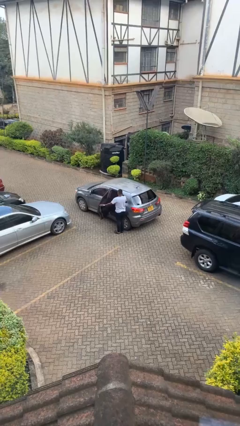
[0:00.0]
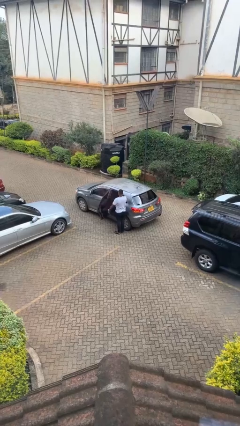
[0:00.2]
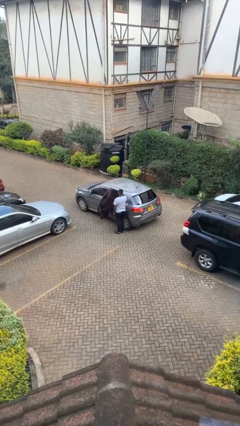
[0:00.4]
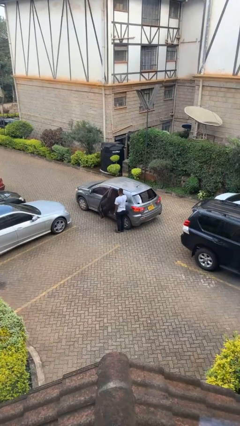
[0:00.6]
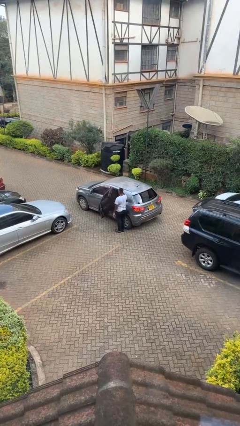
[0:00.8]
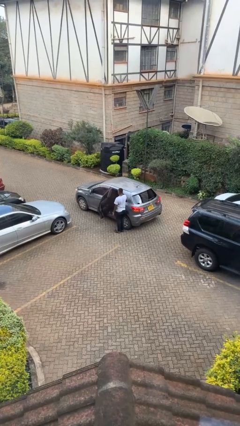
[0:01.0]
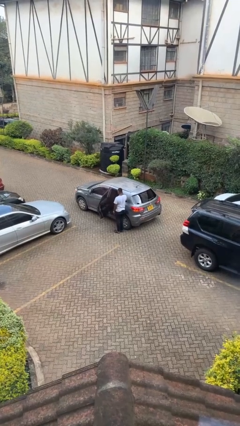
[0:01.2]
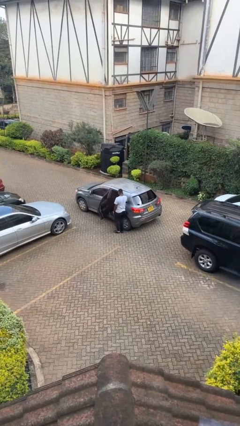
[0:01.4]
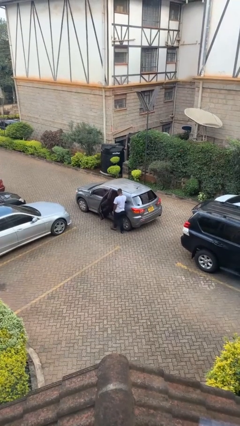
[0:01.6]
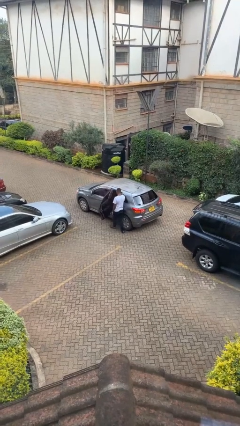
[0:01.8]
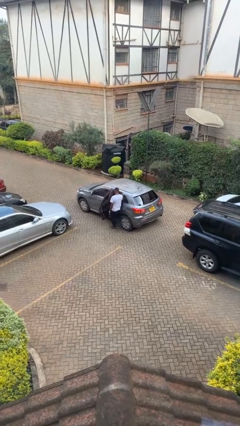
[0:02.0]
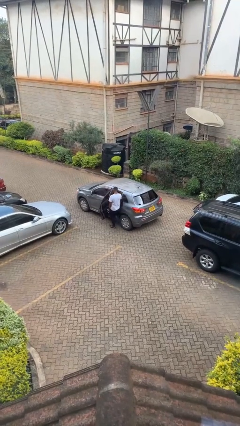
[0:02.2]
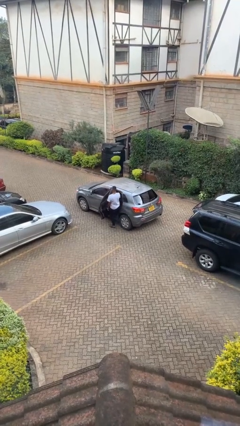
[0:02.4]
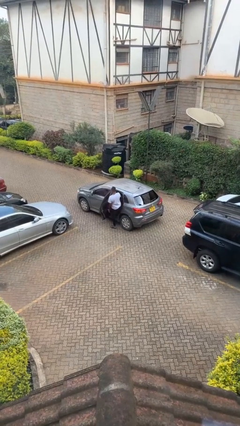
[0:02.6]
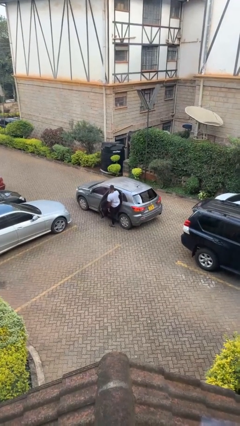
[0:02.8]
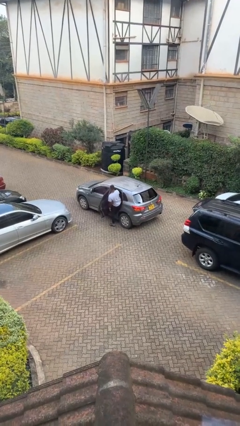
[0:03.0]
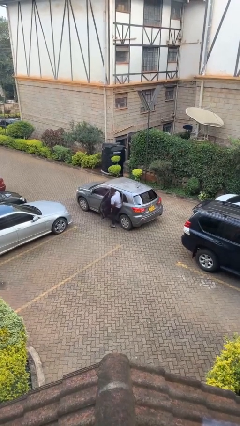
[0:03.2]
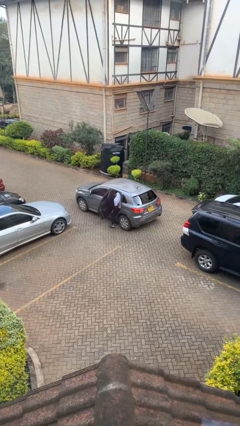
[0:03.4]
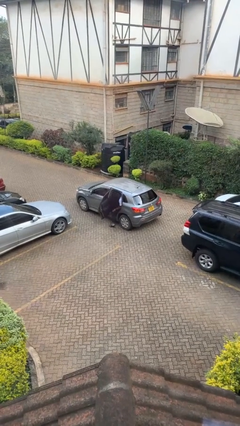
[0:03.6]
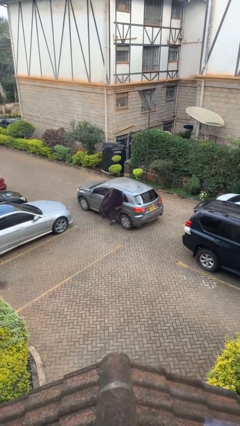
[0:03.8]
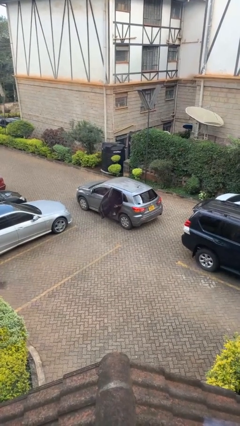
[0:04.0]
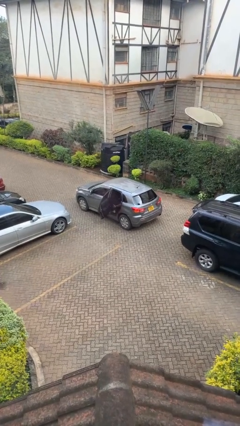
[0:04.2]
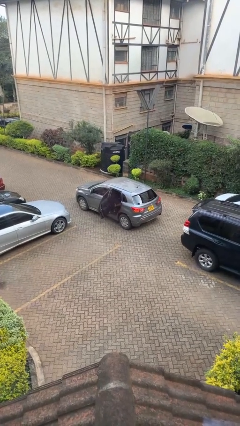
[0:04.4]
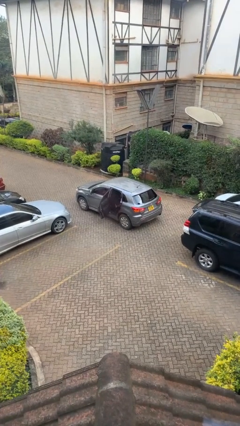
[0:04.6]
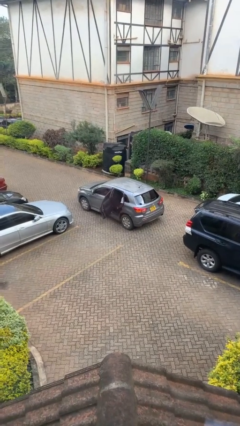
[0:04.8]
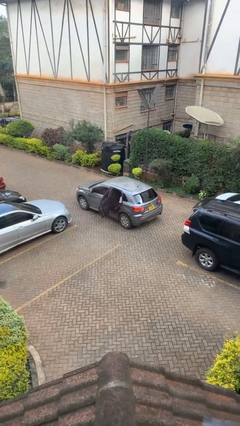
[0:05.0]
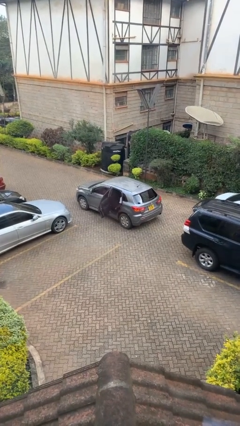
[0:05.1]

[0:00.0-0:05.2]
person enters car

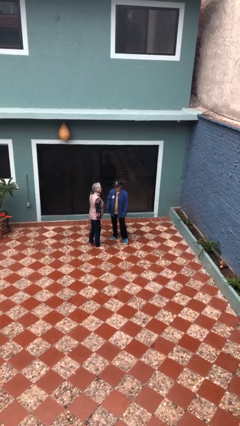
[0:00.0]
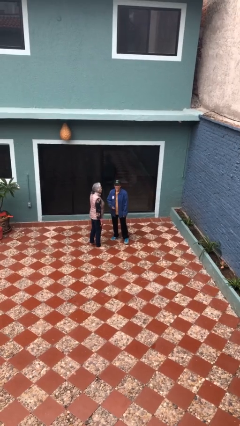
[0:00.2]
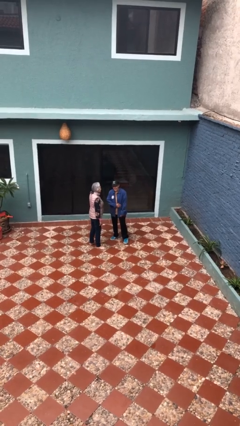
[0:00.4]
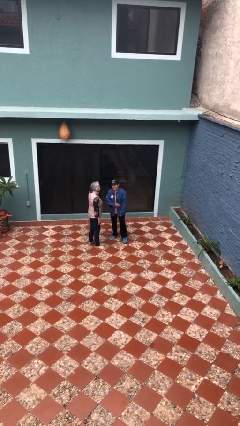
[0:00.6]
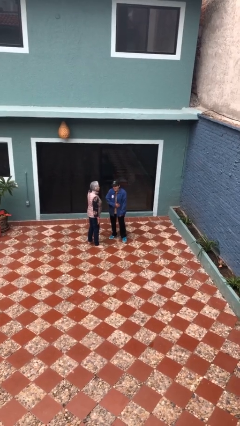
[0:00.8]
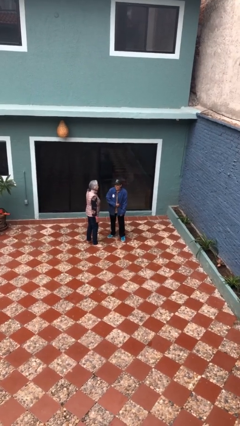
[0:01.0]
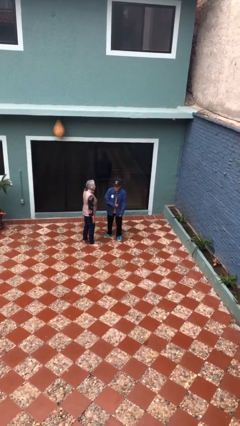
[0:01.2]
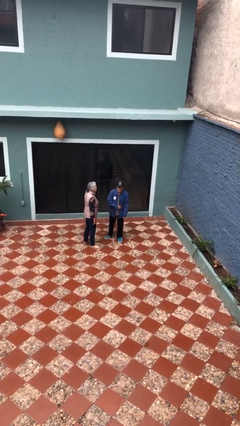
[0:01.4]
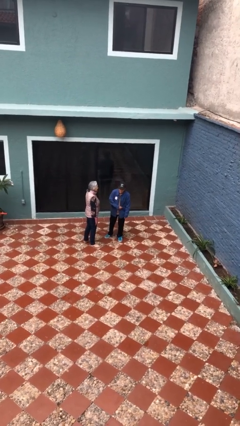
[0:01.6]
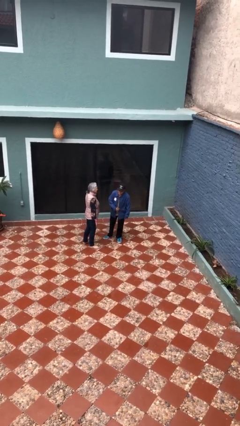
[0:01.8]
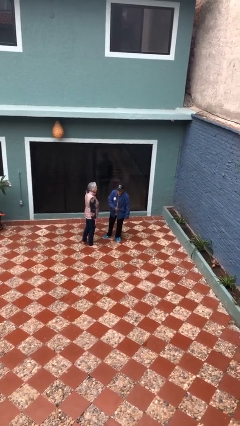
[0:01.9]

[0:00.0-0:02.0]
person laughs with person

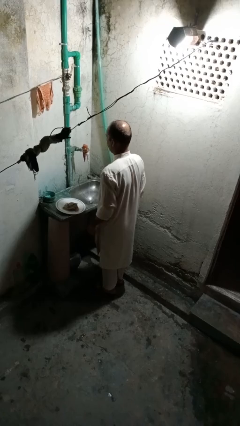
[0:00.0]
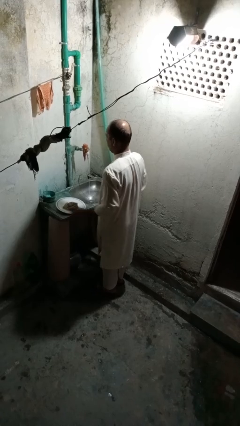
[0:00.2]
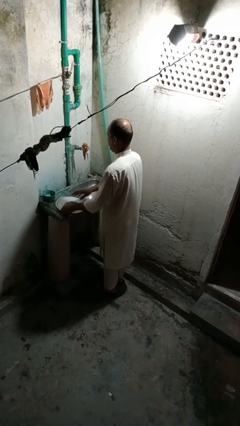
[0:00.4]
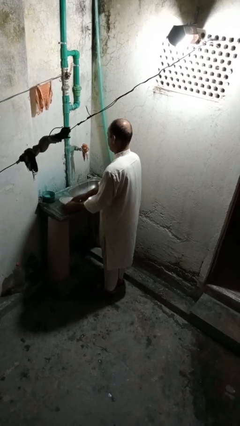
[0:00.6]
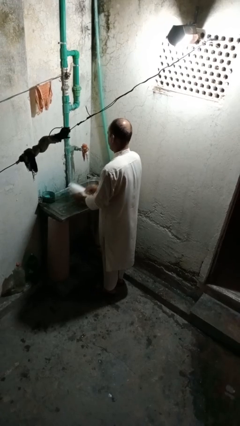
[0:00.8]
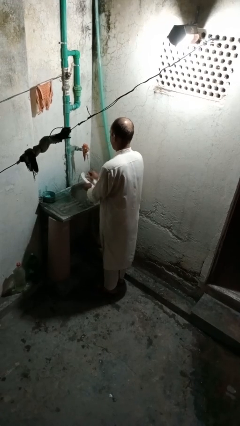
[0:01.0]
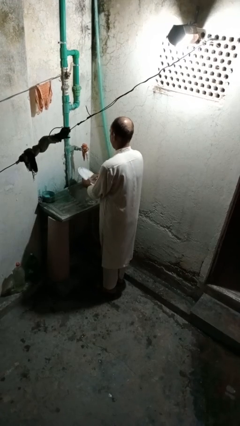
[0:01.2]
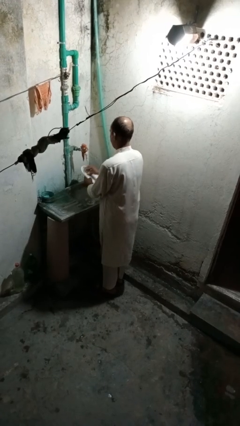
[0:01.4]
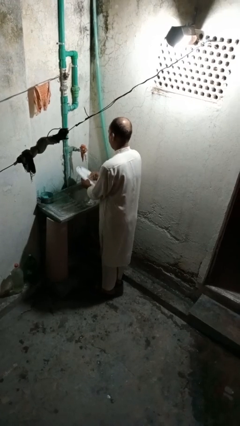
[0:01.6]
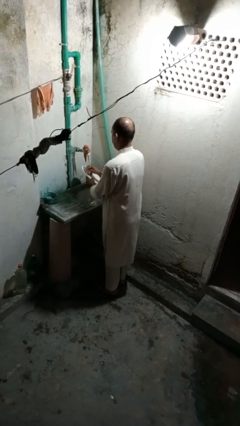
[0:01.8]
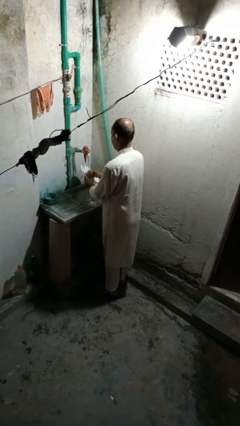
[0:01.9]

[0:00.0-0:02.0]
person washes dish

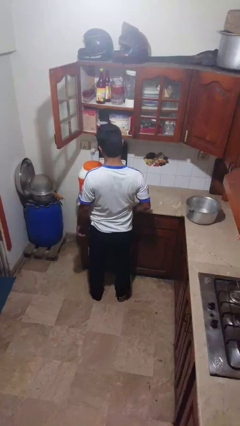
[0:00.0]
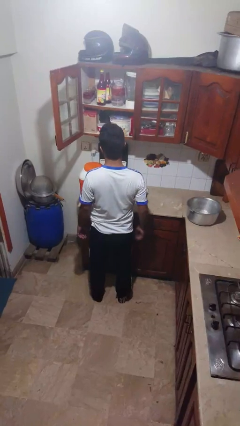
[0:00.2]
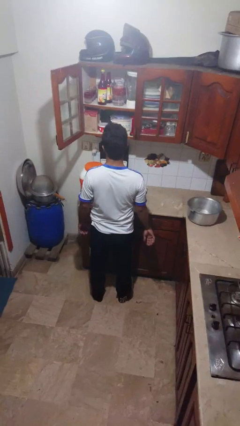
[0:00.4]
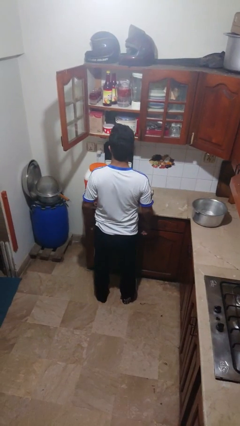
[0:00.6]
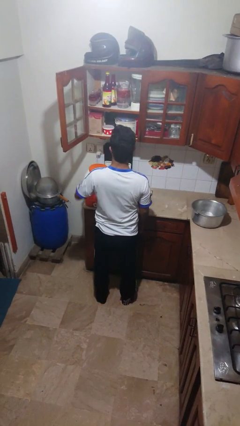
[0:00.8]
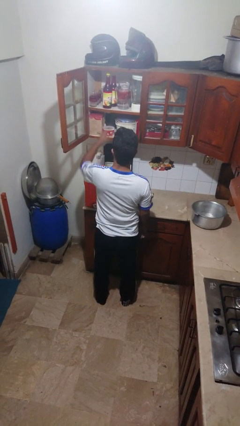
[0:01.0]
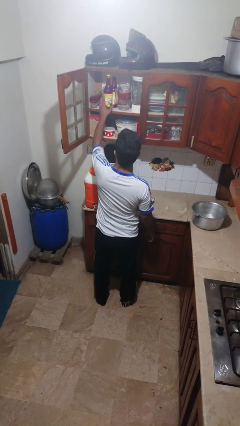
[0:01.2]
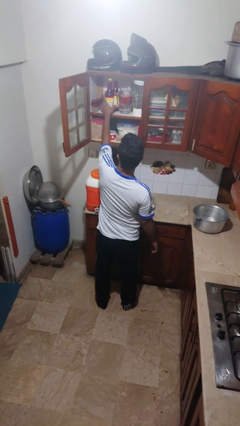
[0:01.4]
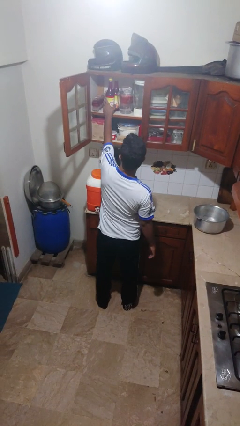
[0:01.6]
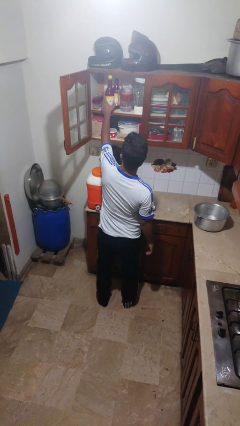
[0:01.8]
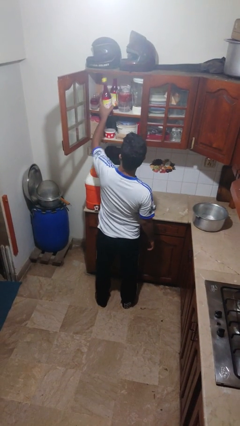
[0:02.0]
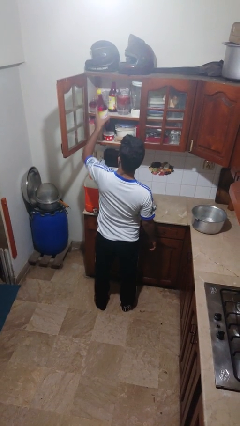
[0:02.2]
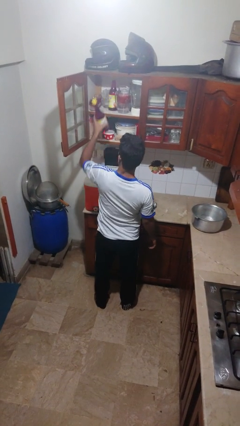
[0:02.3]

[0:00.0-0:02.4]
person picks up object from cabinet

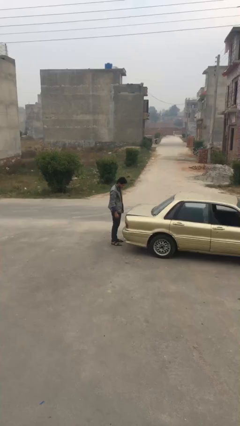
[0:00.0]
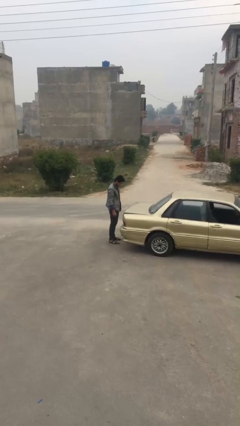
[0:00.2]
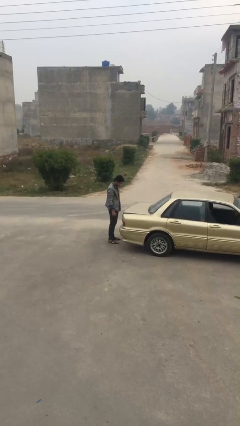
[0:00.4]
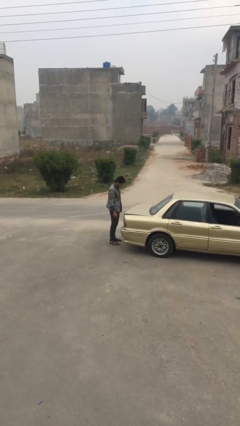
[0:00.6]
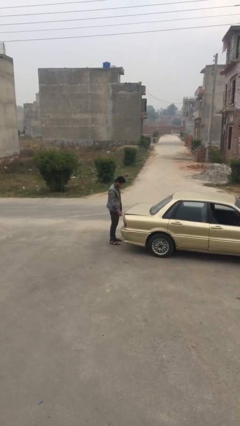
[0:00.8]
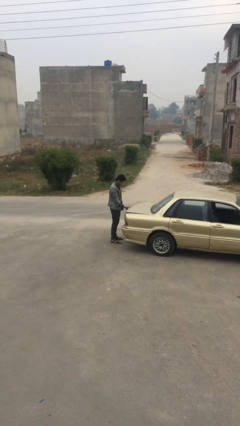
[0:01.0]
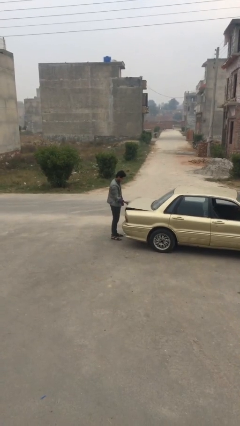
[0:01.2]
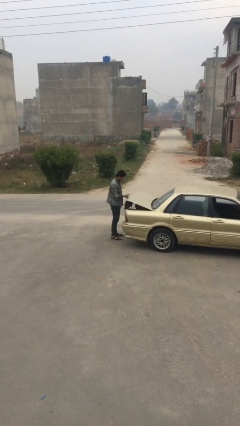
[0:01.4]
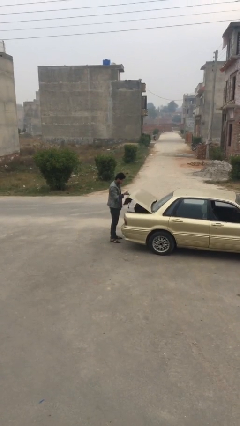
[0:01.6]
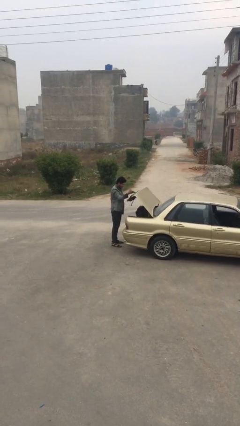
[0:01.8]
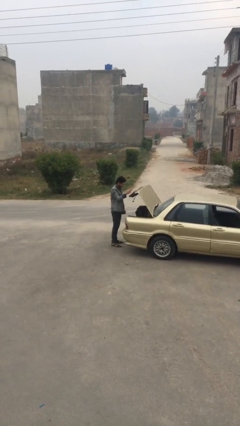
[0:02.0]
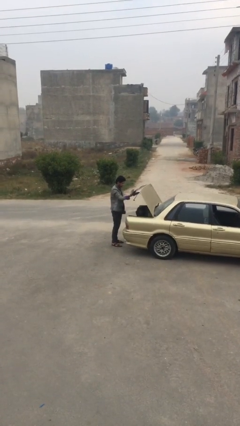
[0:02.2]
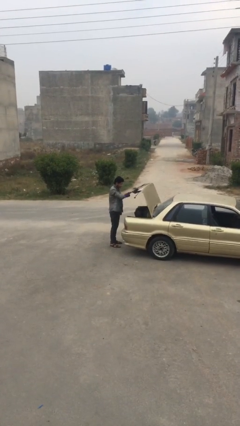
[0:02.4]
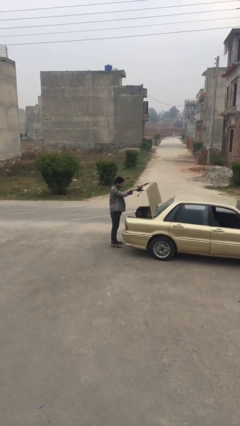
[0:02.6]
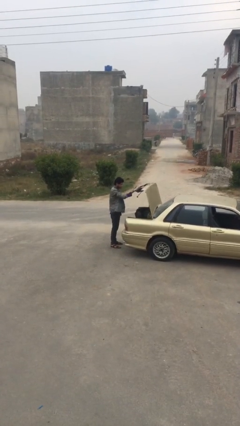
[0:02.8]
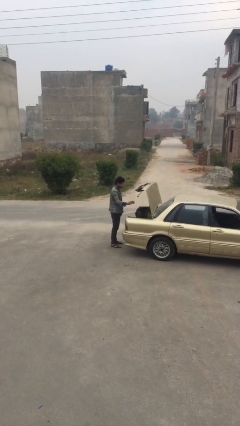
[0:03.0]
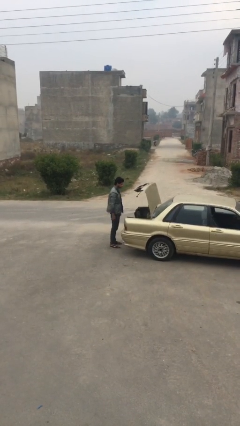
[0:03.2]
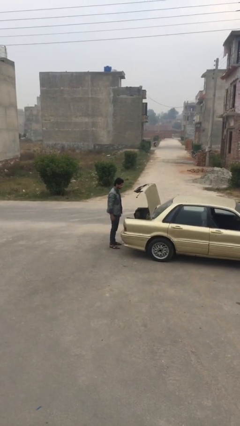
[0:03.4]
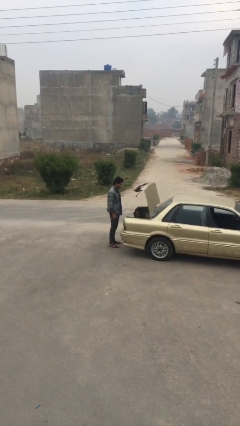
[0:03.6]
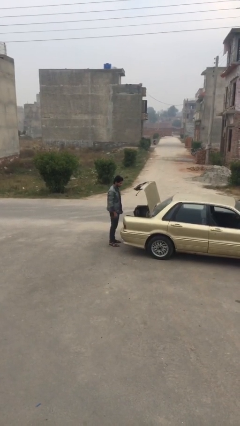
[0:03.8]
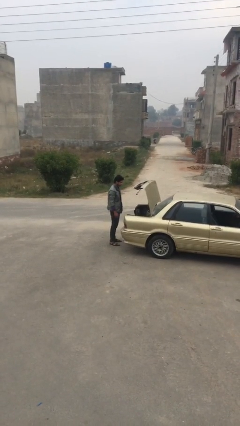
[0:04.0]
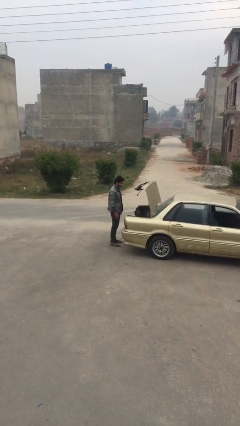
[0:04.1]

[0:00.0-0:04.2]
person opens car trunk

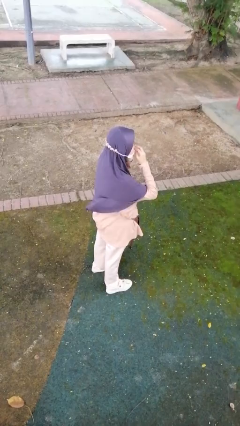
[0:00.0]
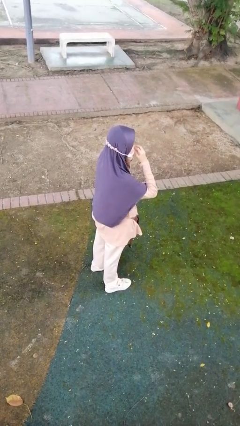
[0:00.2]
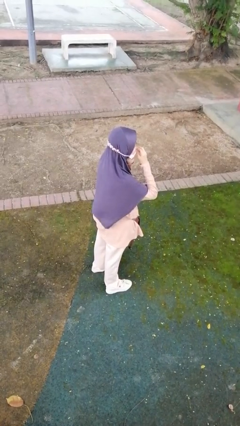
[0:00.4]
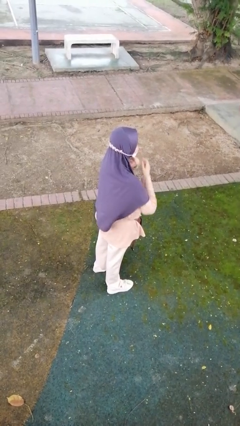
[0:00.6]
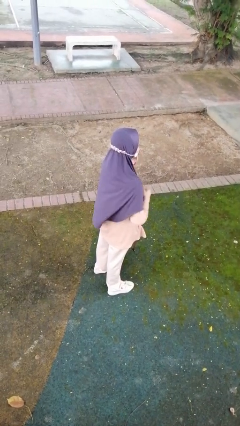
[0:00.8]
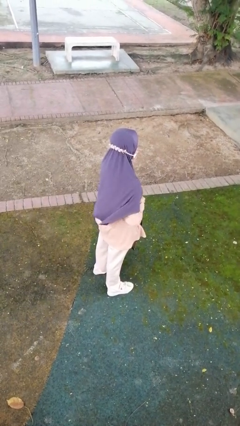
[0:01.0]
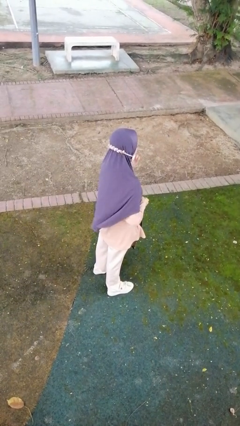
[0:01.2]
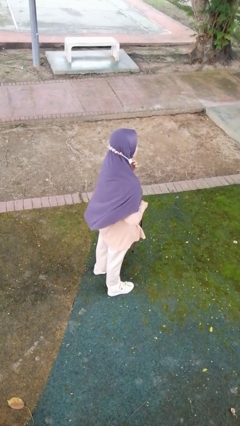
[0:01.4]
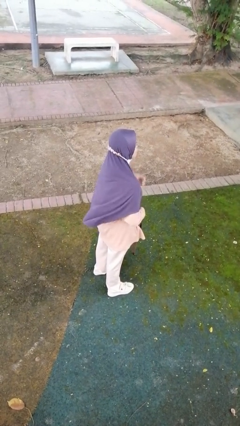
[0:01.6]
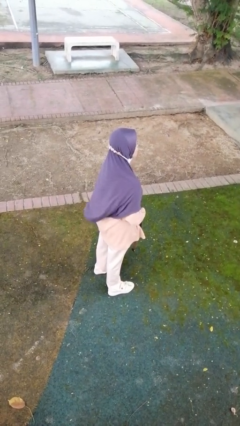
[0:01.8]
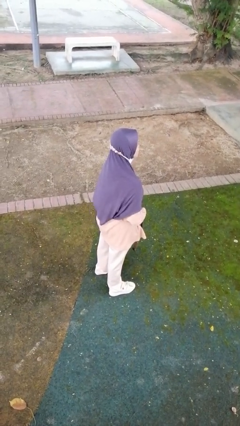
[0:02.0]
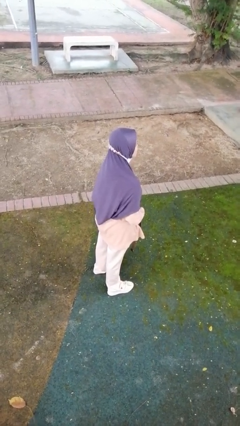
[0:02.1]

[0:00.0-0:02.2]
person takes off facemask
